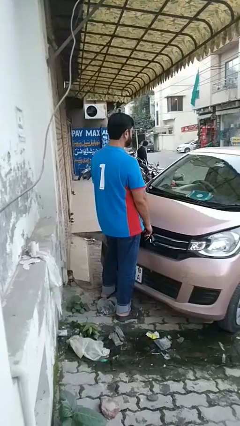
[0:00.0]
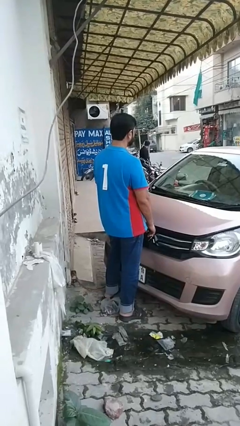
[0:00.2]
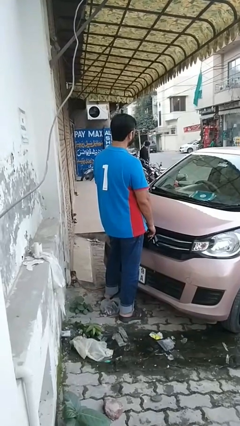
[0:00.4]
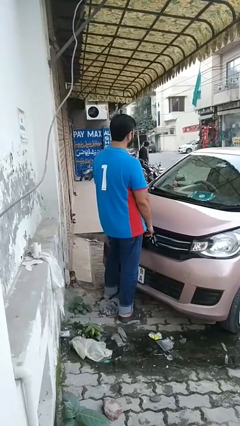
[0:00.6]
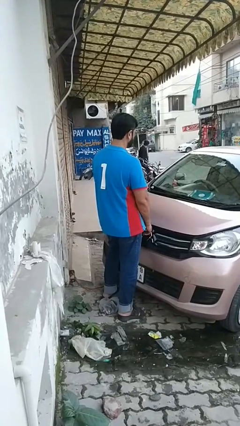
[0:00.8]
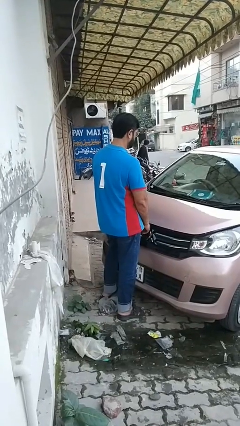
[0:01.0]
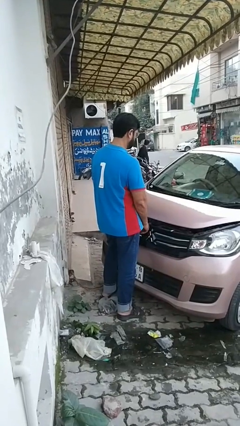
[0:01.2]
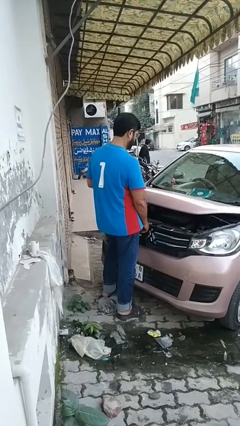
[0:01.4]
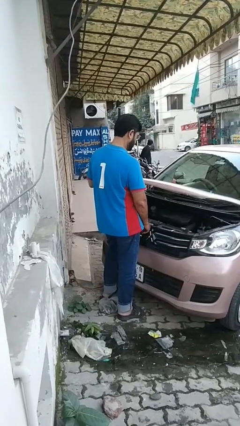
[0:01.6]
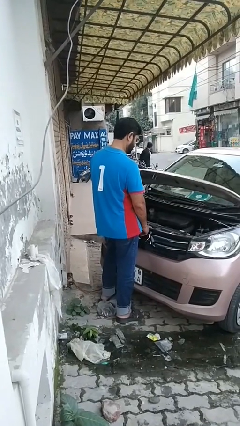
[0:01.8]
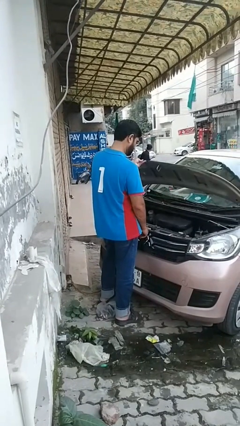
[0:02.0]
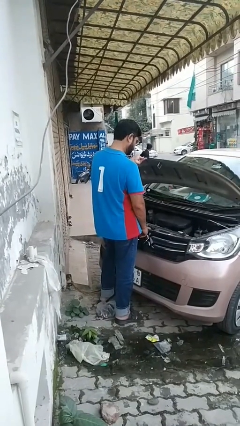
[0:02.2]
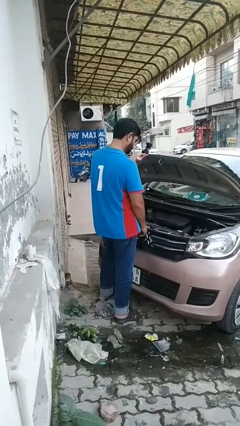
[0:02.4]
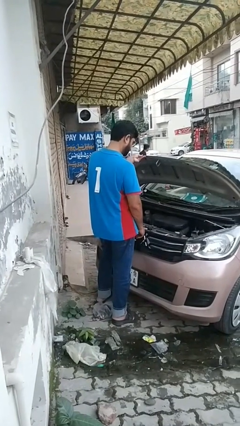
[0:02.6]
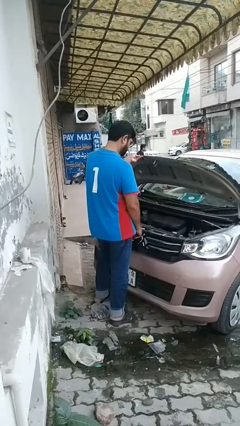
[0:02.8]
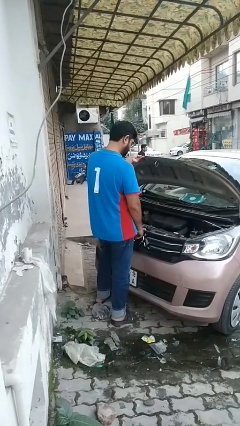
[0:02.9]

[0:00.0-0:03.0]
person opens car hood

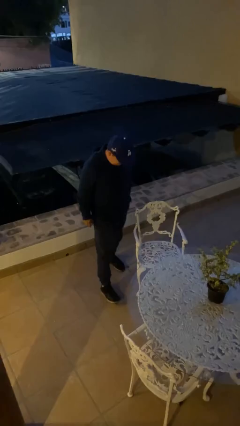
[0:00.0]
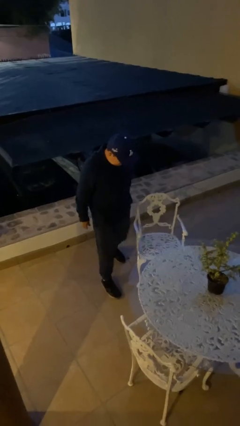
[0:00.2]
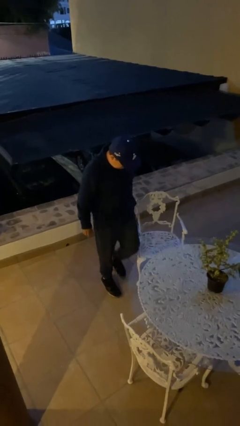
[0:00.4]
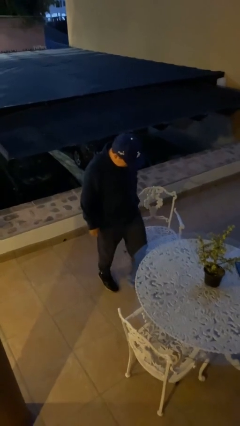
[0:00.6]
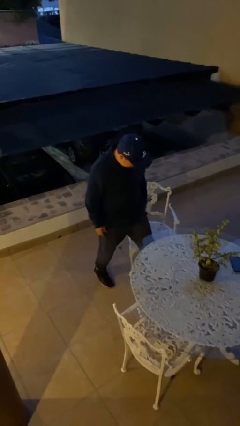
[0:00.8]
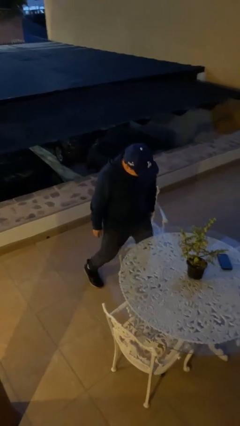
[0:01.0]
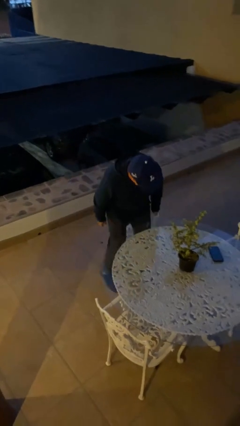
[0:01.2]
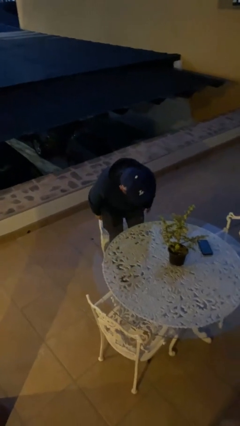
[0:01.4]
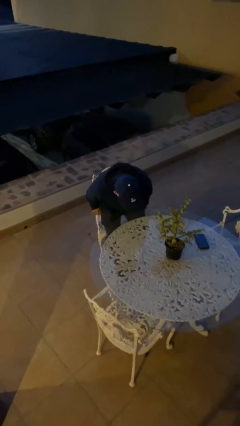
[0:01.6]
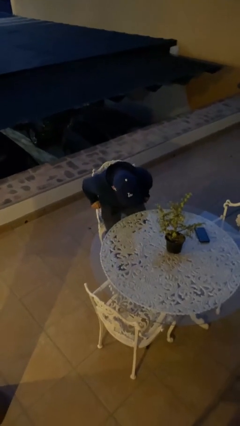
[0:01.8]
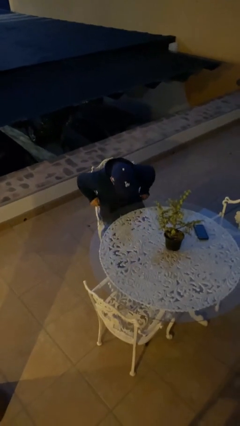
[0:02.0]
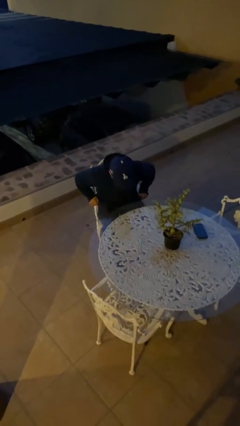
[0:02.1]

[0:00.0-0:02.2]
person sits down

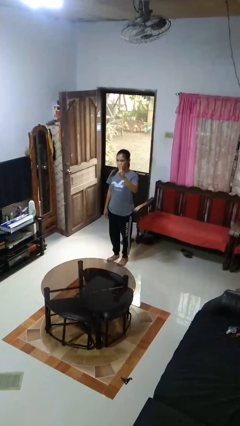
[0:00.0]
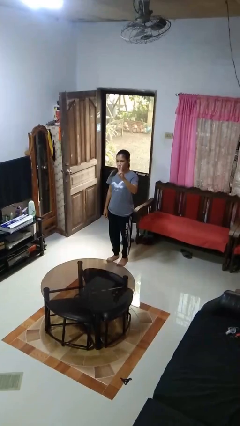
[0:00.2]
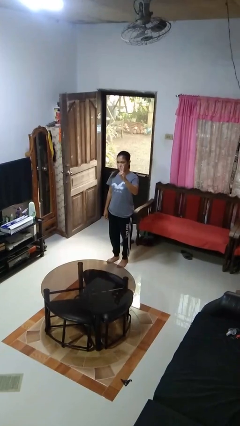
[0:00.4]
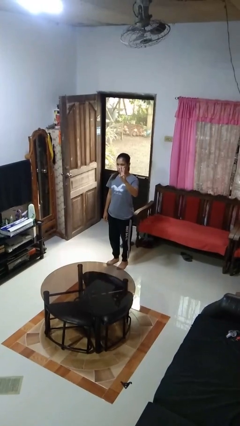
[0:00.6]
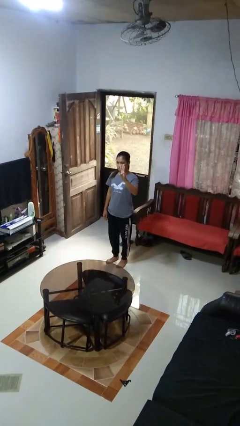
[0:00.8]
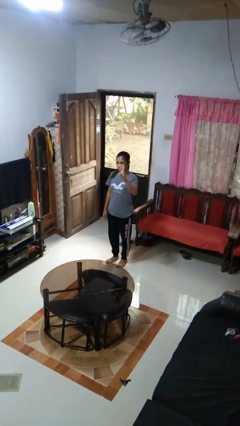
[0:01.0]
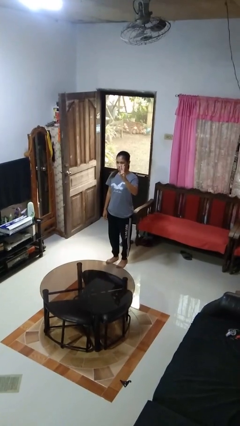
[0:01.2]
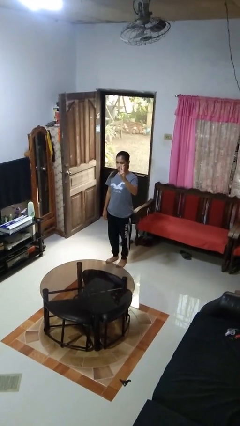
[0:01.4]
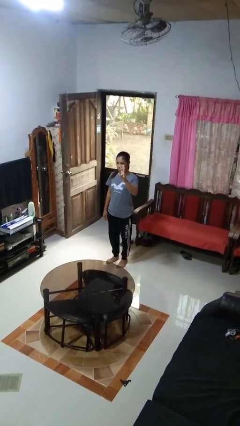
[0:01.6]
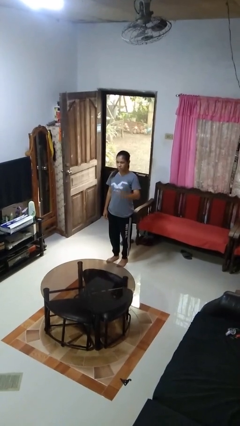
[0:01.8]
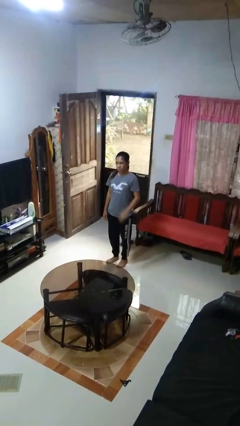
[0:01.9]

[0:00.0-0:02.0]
person gestures number three

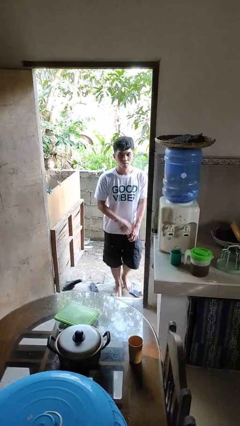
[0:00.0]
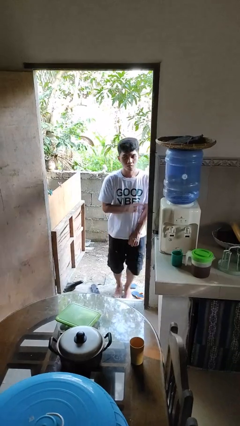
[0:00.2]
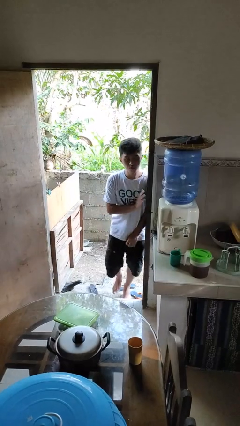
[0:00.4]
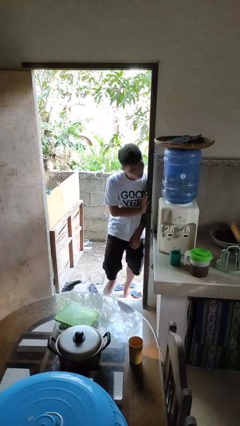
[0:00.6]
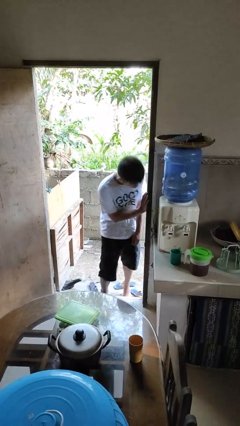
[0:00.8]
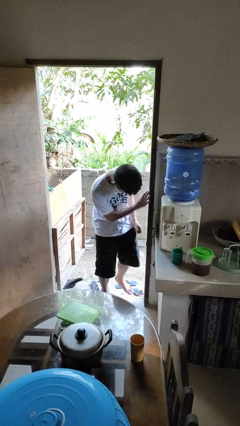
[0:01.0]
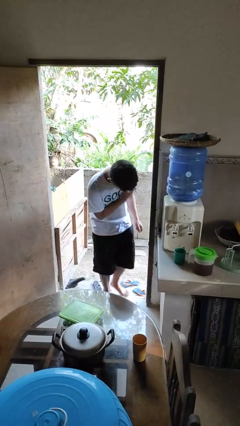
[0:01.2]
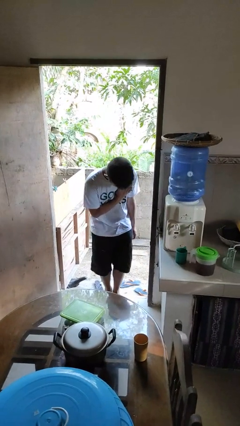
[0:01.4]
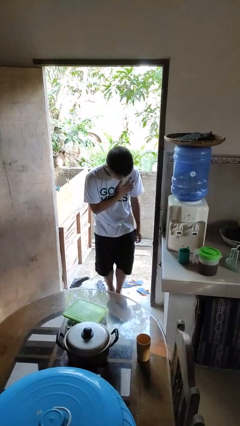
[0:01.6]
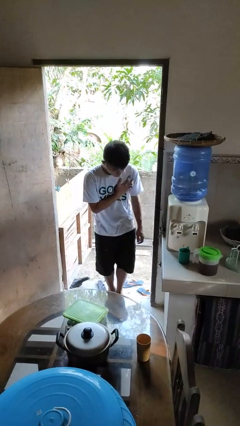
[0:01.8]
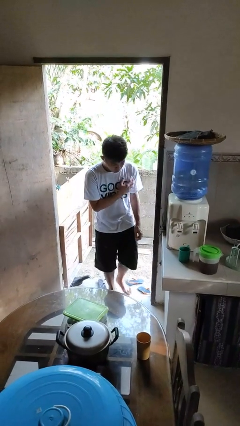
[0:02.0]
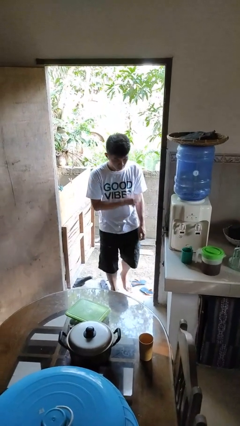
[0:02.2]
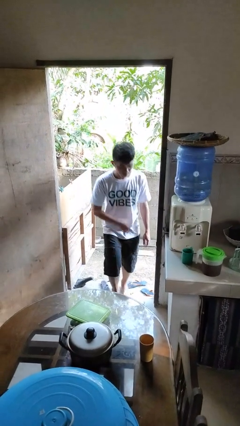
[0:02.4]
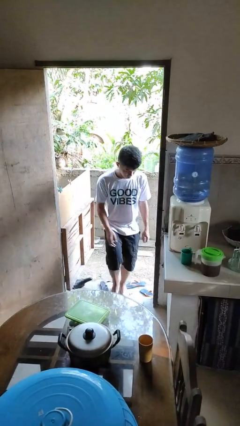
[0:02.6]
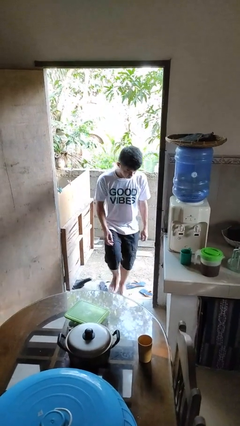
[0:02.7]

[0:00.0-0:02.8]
person bumps into wall

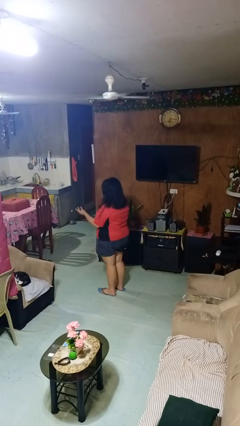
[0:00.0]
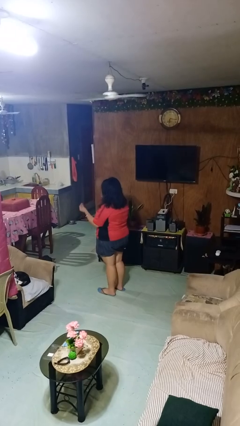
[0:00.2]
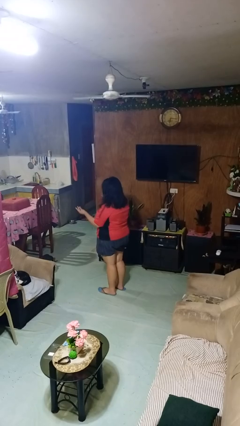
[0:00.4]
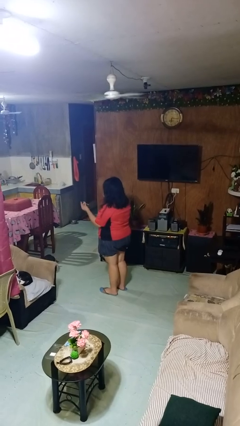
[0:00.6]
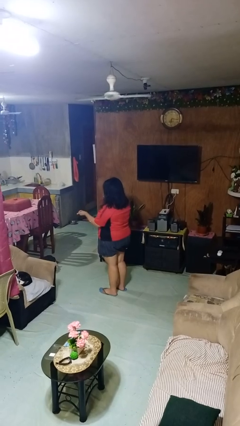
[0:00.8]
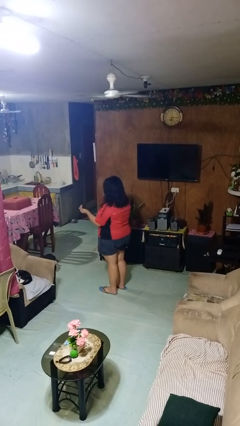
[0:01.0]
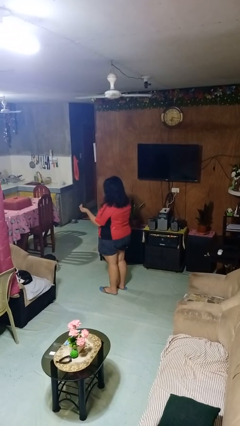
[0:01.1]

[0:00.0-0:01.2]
person snaps fingers

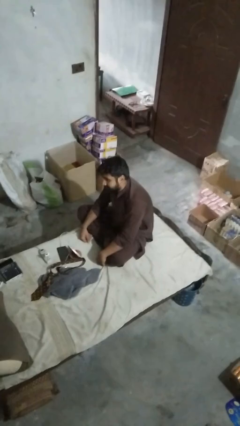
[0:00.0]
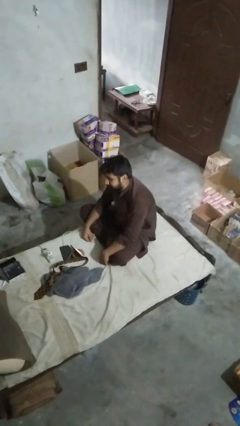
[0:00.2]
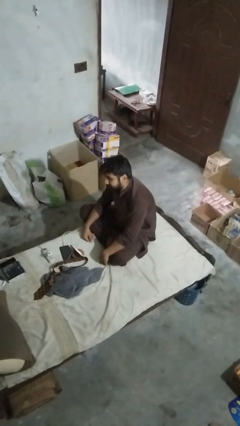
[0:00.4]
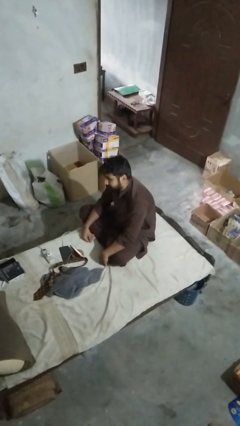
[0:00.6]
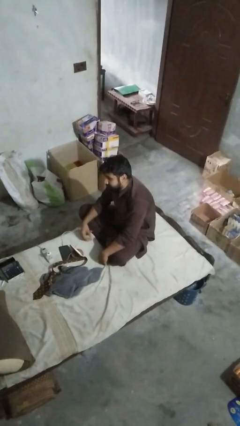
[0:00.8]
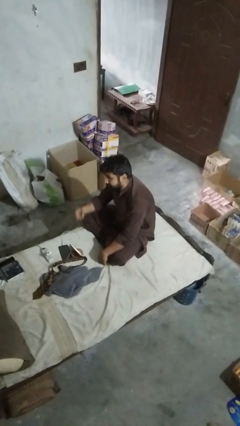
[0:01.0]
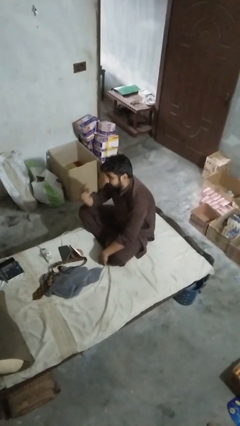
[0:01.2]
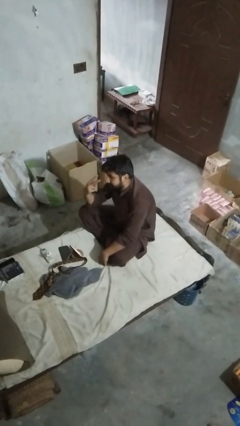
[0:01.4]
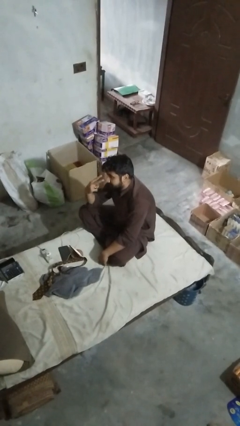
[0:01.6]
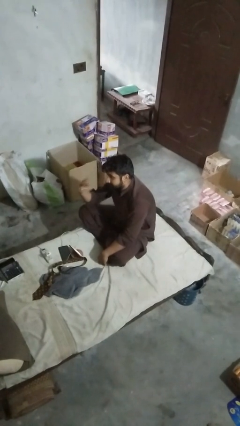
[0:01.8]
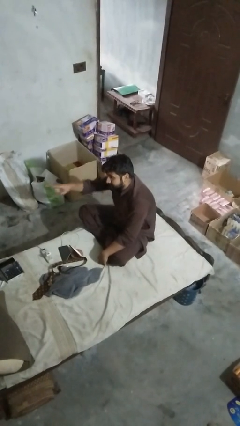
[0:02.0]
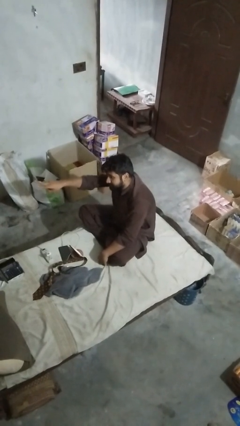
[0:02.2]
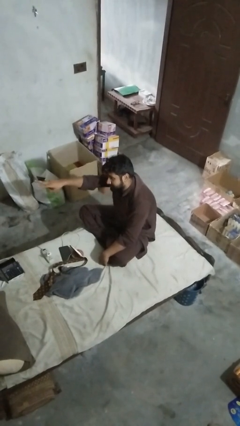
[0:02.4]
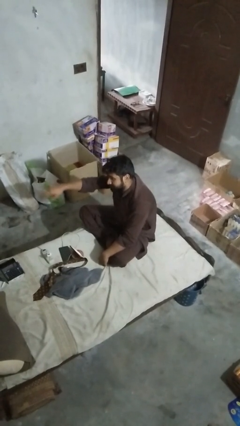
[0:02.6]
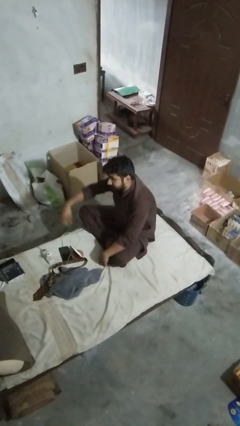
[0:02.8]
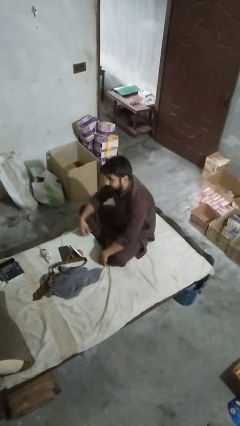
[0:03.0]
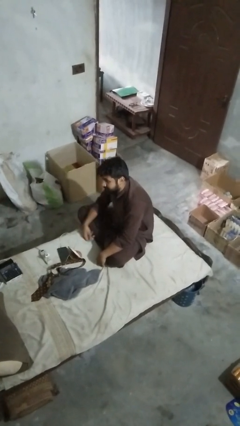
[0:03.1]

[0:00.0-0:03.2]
person gestures watch closely

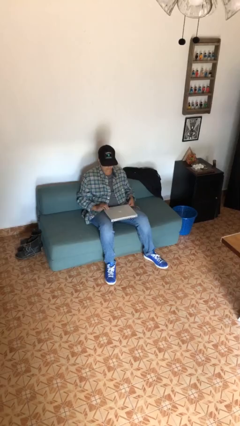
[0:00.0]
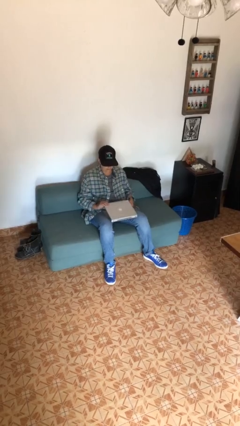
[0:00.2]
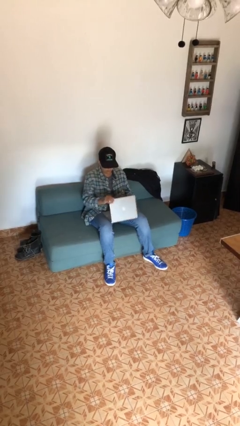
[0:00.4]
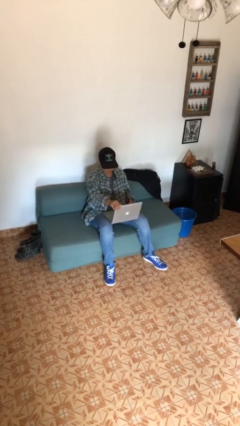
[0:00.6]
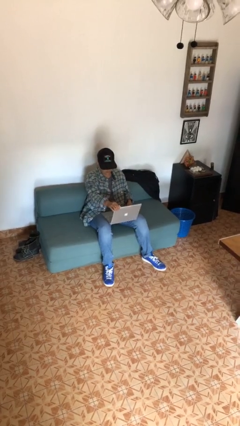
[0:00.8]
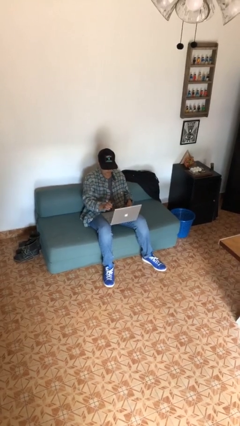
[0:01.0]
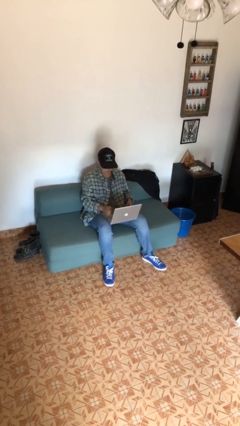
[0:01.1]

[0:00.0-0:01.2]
person opens laptop

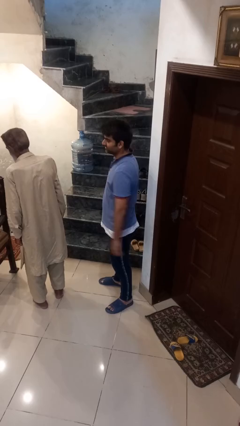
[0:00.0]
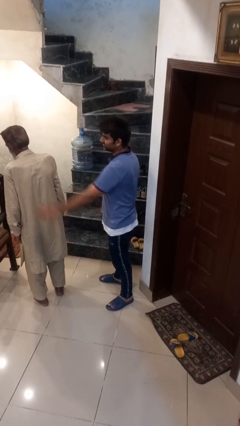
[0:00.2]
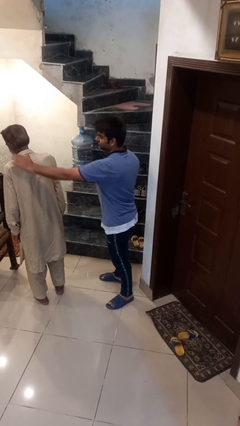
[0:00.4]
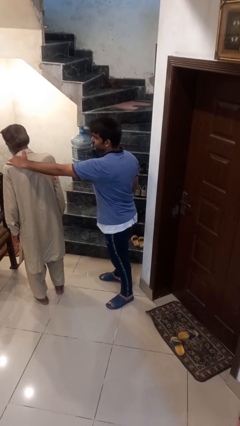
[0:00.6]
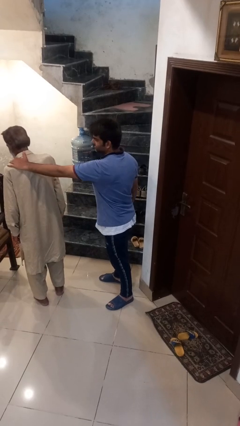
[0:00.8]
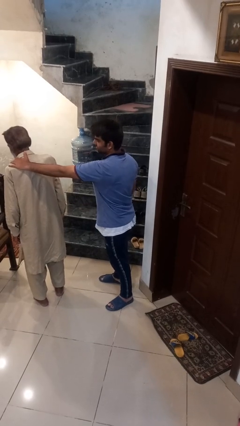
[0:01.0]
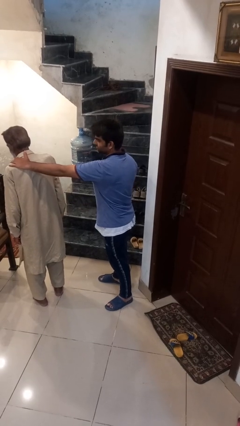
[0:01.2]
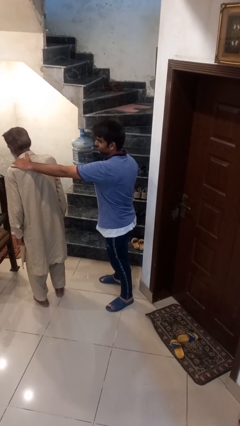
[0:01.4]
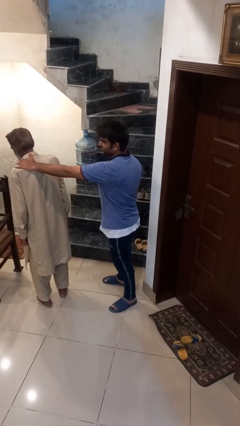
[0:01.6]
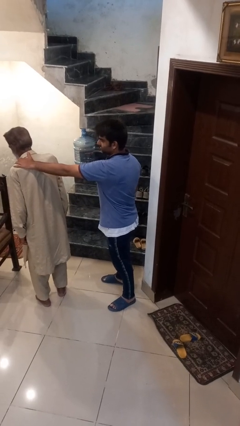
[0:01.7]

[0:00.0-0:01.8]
person grabs person by shoulder
